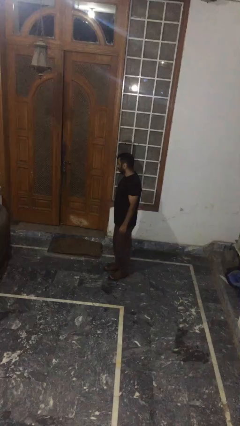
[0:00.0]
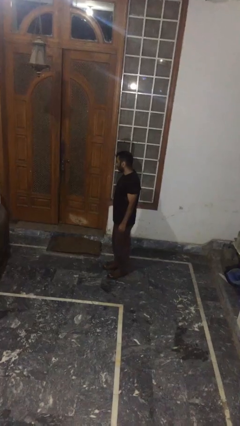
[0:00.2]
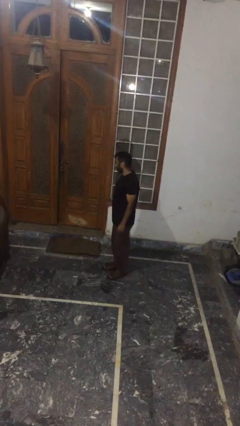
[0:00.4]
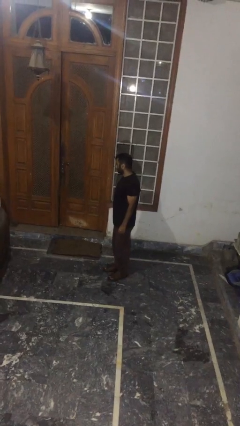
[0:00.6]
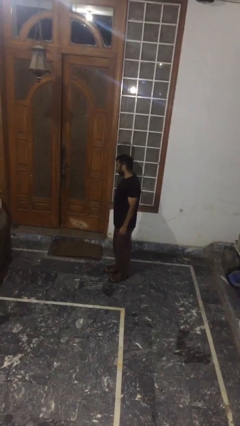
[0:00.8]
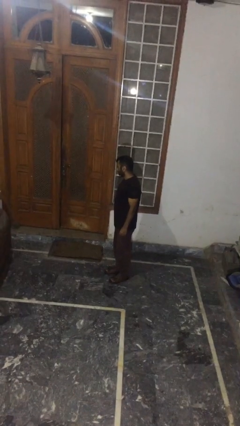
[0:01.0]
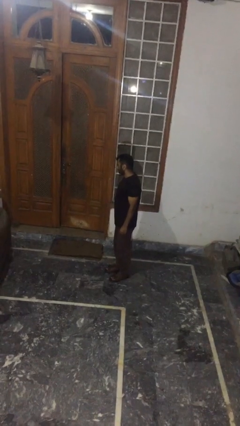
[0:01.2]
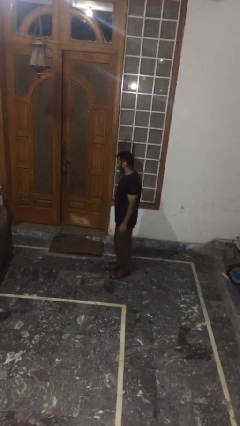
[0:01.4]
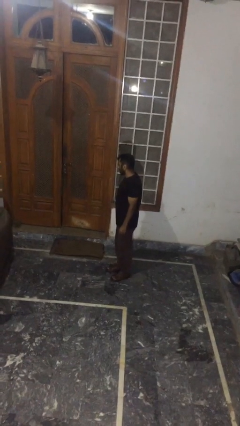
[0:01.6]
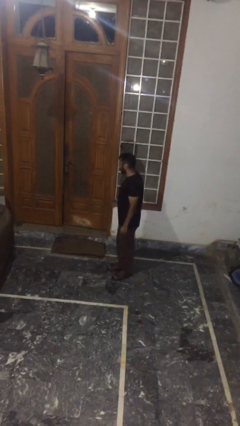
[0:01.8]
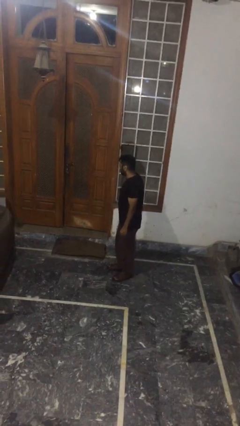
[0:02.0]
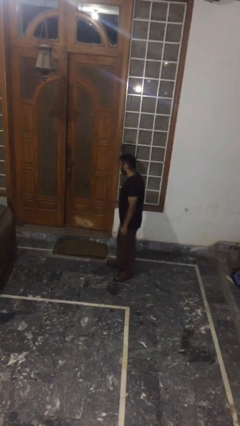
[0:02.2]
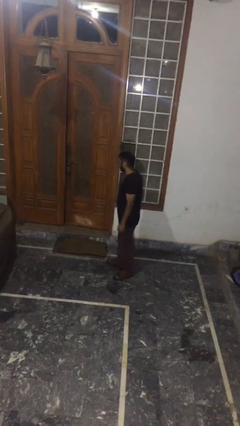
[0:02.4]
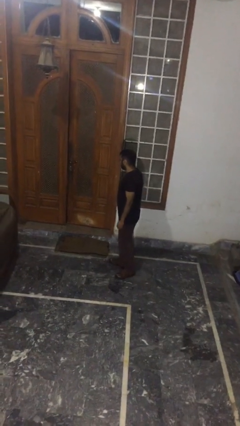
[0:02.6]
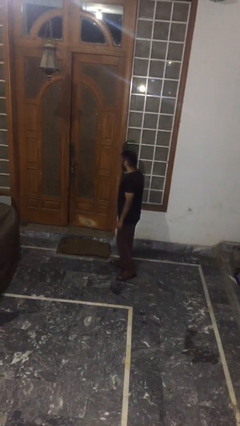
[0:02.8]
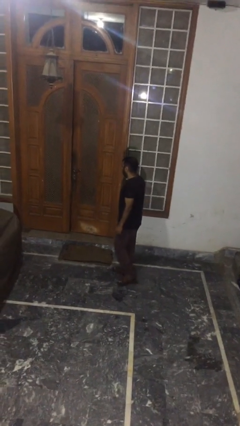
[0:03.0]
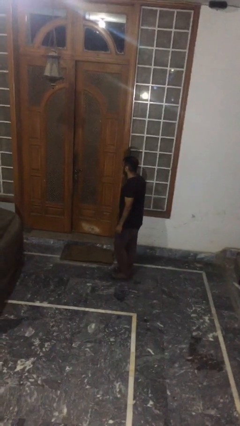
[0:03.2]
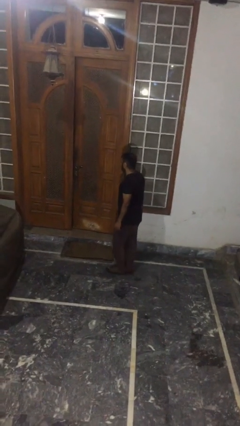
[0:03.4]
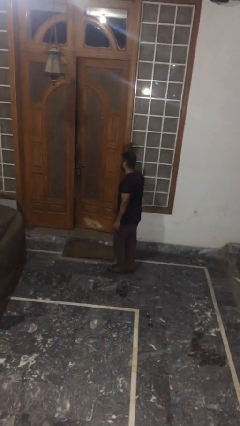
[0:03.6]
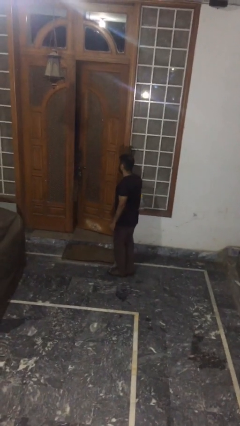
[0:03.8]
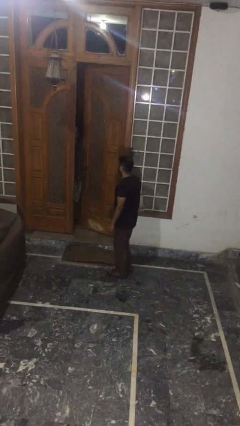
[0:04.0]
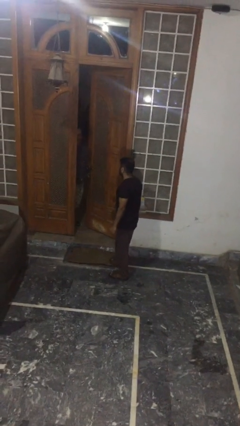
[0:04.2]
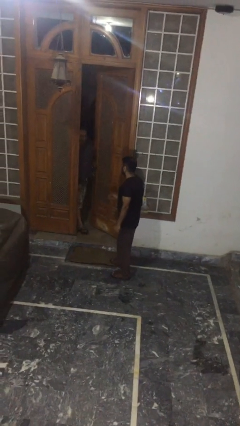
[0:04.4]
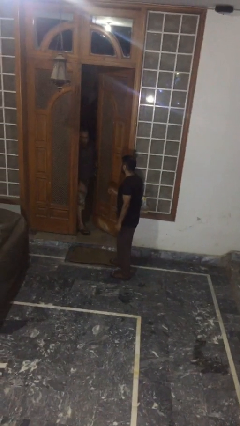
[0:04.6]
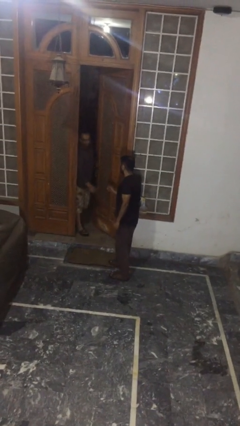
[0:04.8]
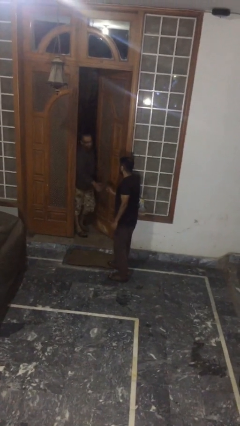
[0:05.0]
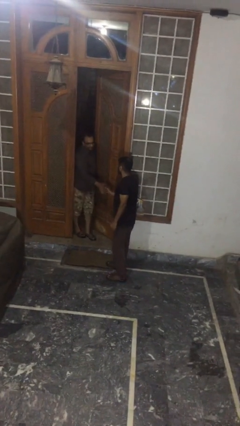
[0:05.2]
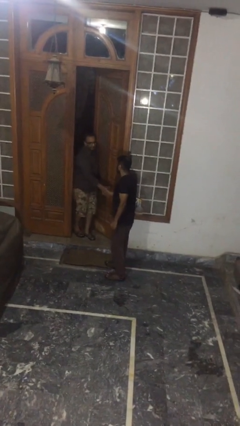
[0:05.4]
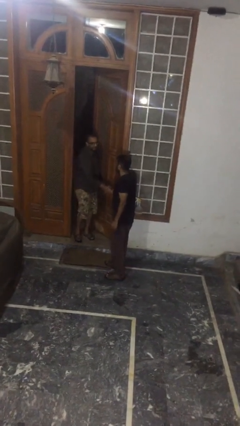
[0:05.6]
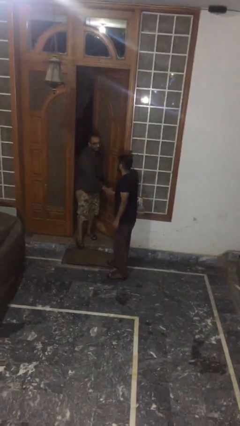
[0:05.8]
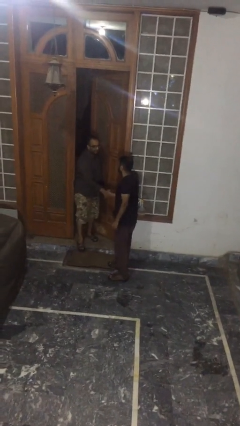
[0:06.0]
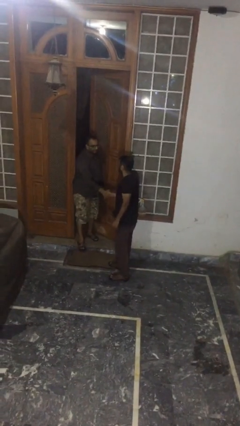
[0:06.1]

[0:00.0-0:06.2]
person shakes hand

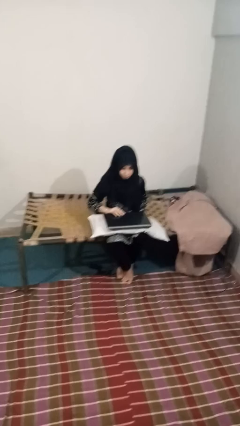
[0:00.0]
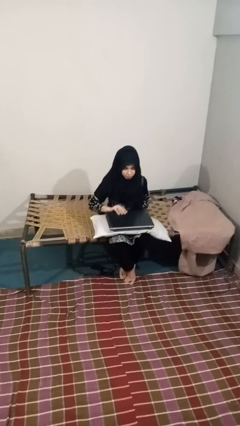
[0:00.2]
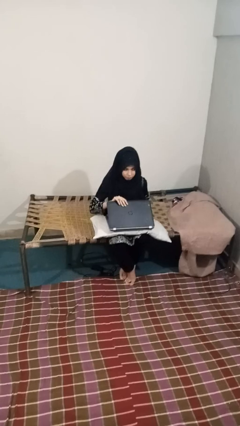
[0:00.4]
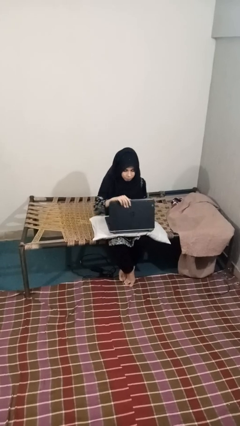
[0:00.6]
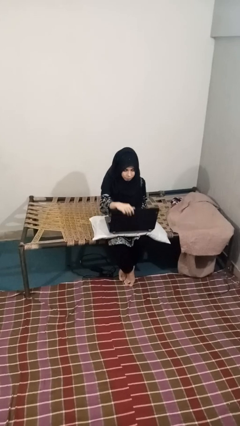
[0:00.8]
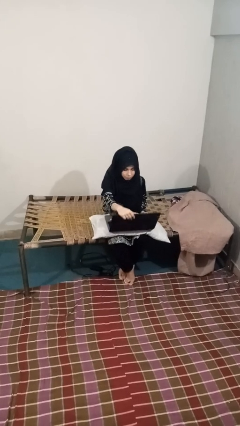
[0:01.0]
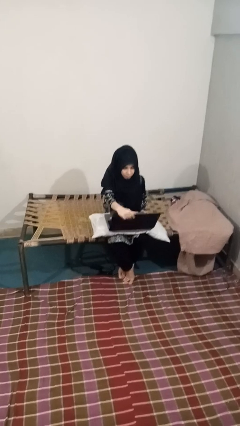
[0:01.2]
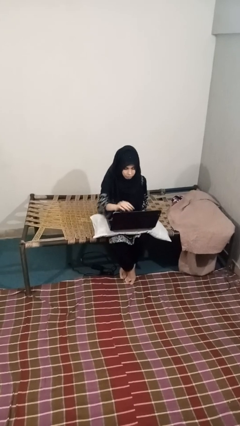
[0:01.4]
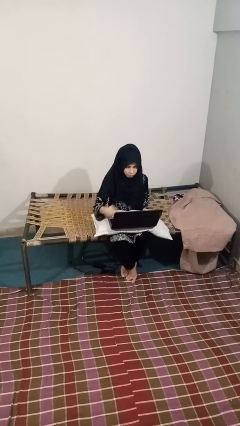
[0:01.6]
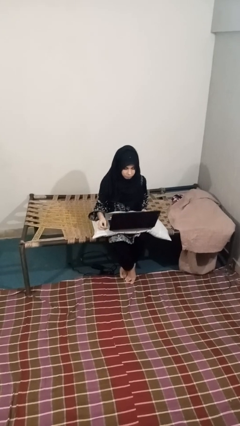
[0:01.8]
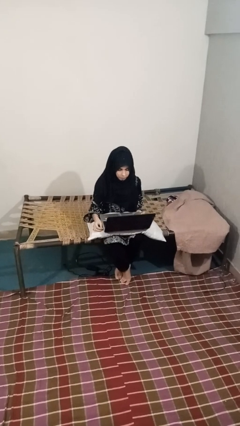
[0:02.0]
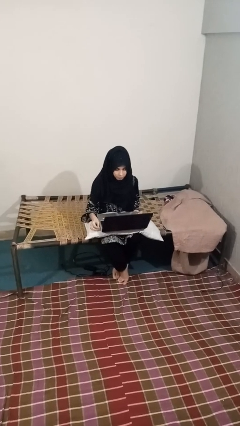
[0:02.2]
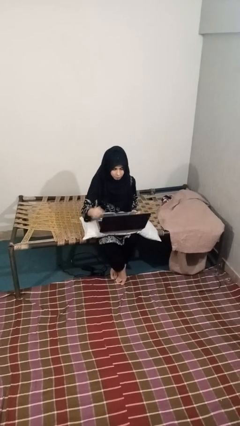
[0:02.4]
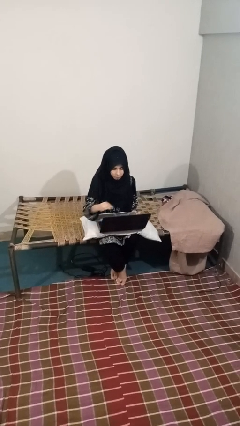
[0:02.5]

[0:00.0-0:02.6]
person opens laptop

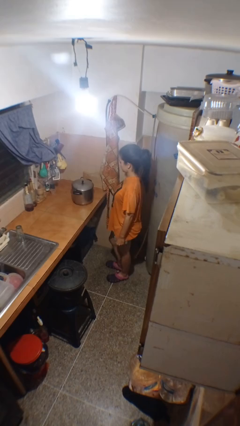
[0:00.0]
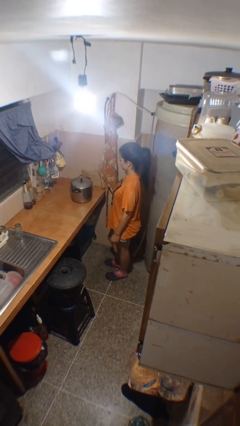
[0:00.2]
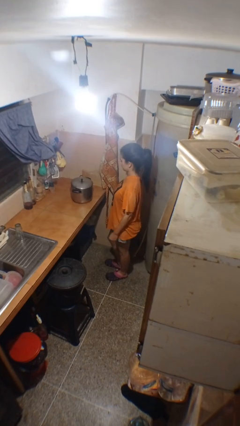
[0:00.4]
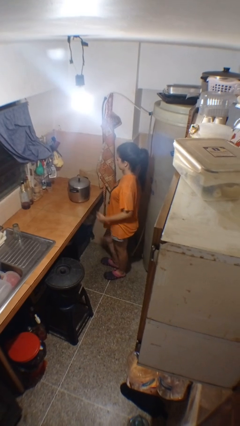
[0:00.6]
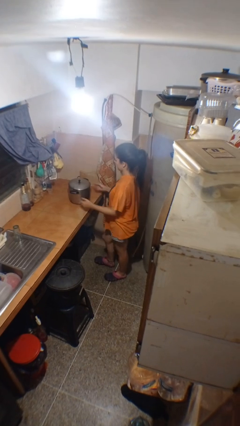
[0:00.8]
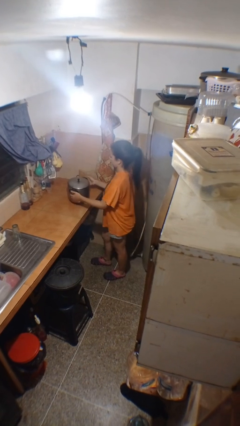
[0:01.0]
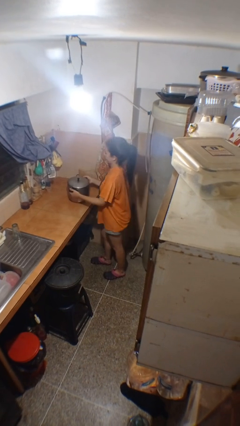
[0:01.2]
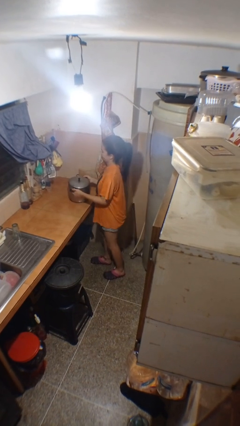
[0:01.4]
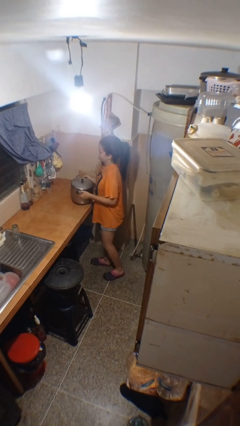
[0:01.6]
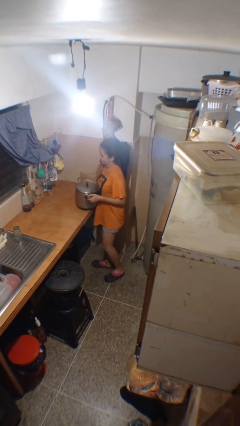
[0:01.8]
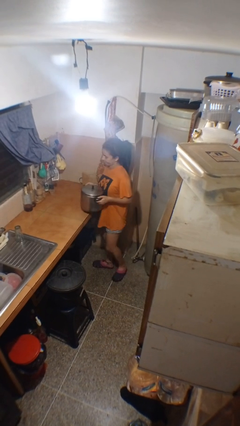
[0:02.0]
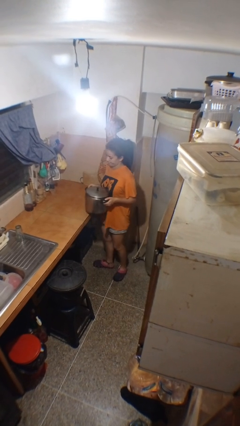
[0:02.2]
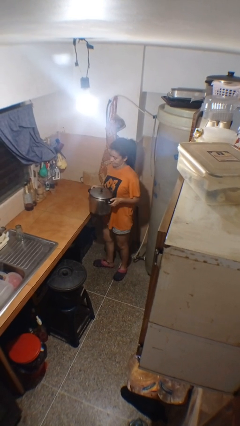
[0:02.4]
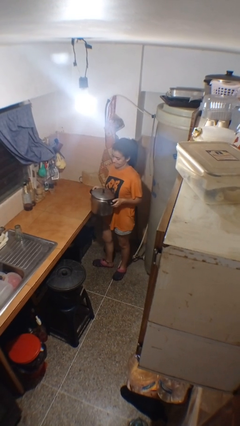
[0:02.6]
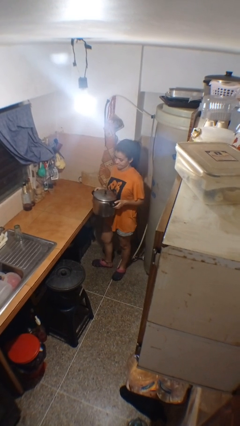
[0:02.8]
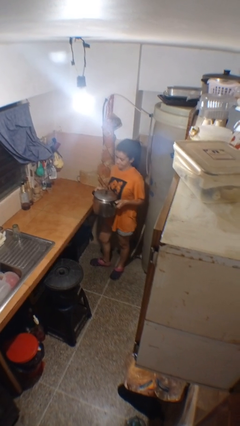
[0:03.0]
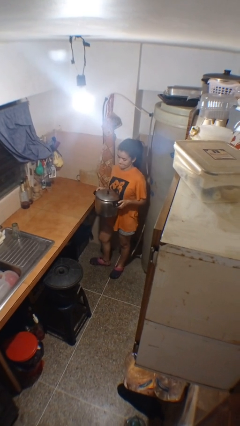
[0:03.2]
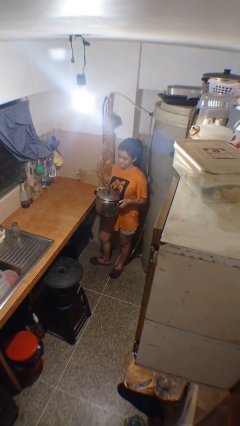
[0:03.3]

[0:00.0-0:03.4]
person picks up object from countertop

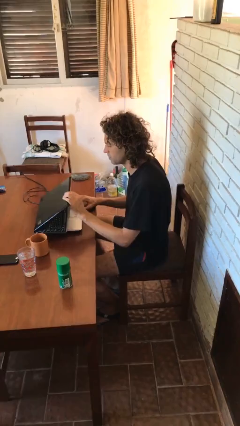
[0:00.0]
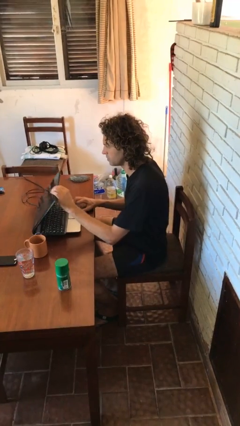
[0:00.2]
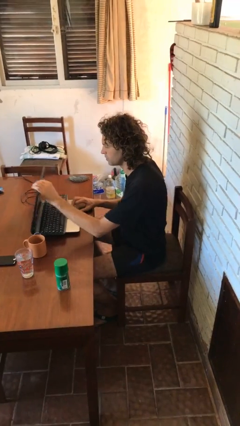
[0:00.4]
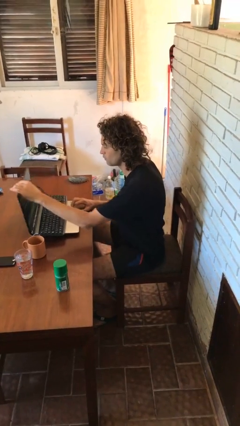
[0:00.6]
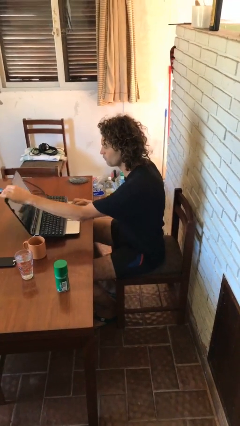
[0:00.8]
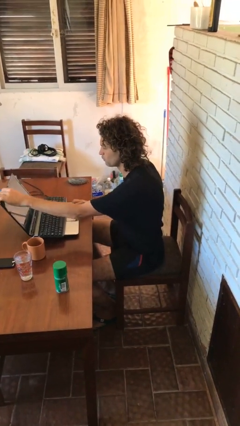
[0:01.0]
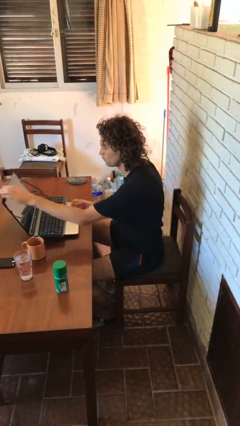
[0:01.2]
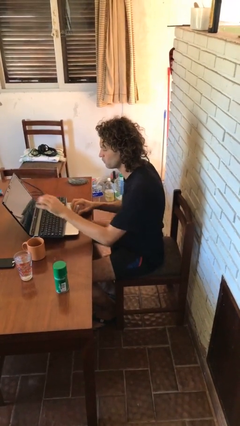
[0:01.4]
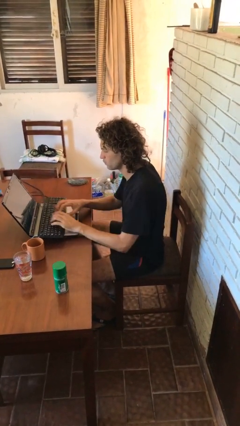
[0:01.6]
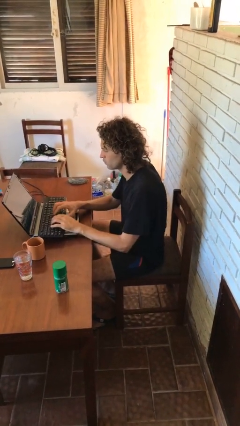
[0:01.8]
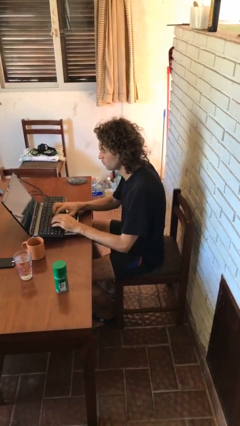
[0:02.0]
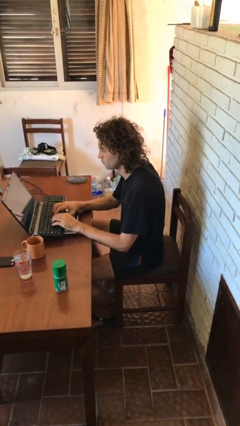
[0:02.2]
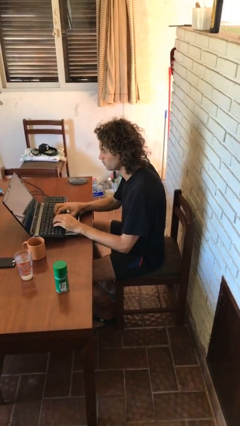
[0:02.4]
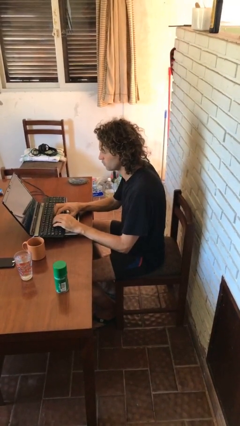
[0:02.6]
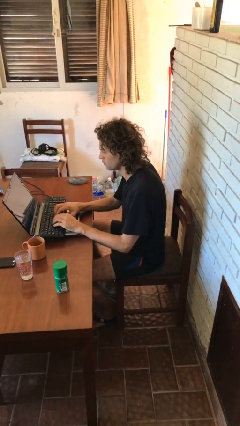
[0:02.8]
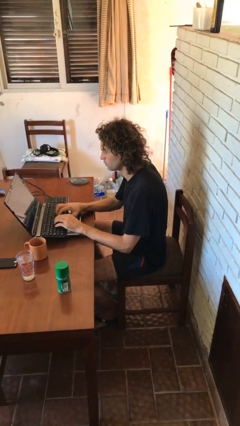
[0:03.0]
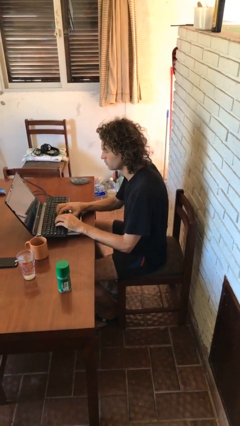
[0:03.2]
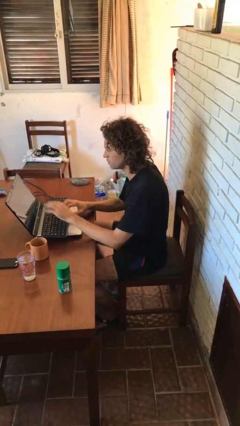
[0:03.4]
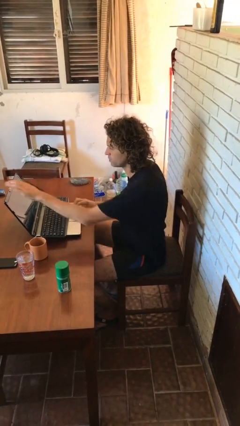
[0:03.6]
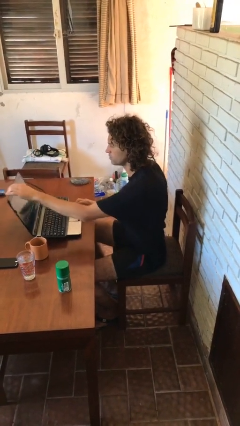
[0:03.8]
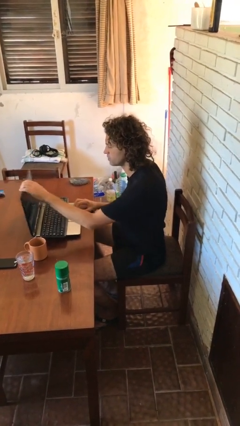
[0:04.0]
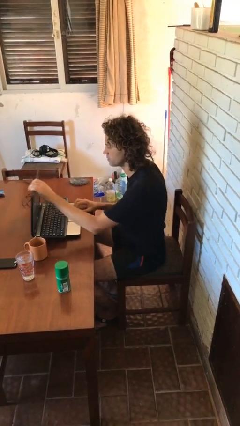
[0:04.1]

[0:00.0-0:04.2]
person interacts with laptop

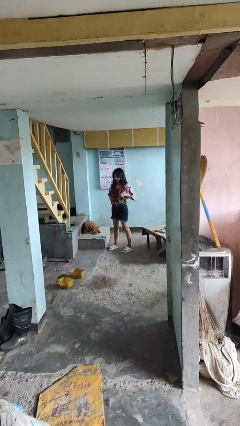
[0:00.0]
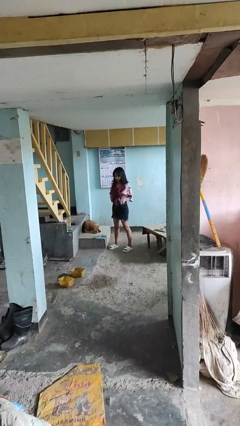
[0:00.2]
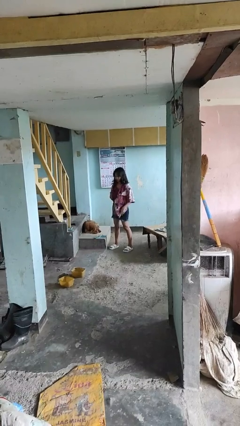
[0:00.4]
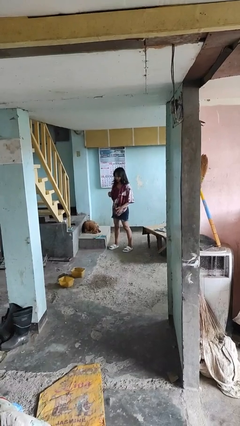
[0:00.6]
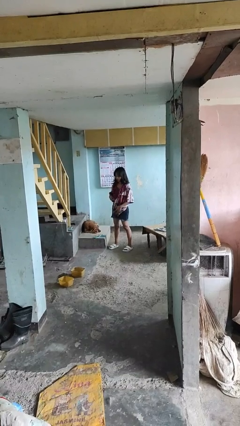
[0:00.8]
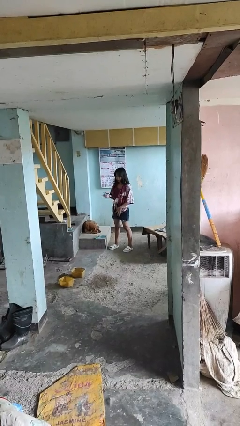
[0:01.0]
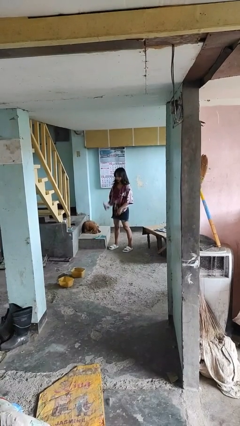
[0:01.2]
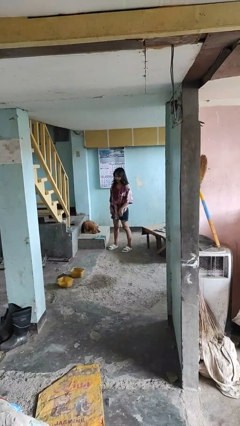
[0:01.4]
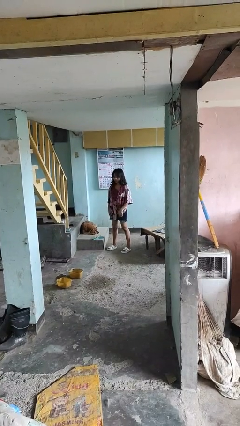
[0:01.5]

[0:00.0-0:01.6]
person untucks shirt
